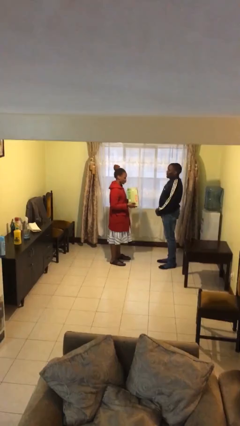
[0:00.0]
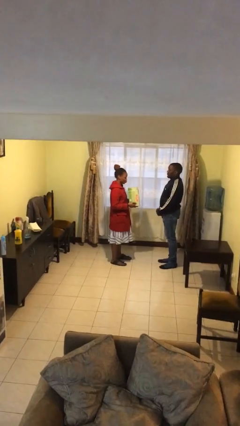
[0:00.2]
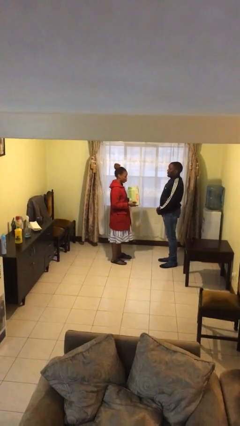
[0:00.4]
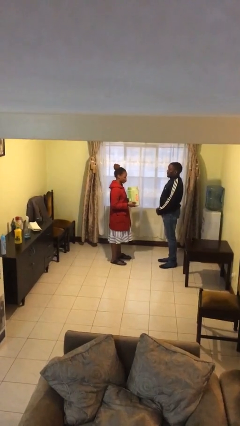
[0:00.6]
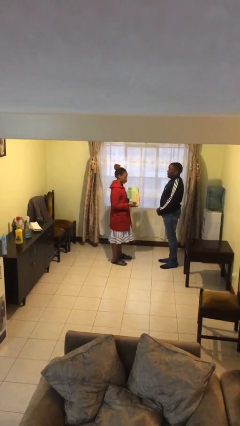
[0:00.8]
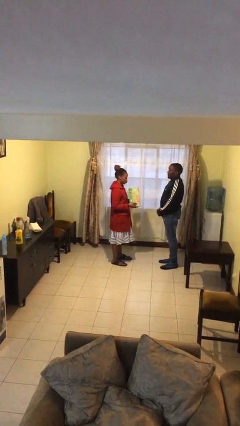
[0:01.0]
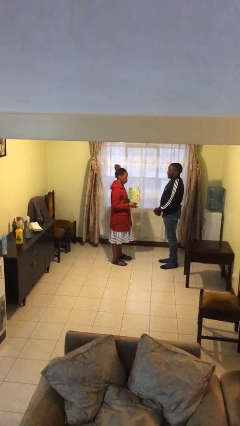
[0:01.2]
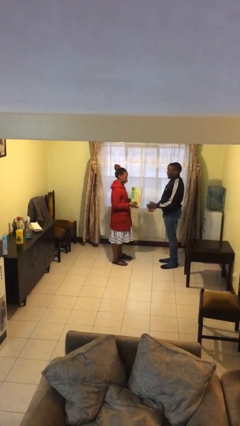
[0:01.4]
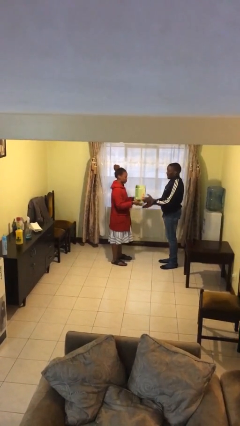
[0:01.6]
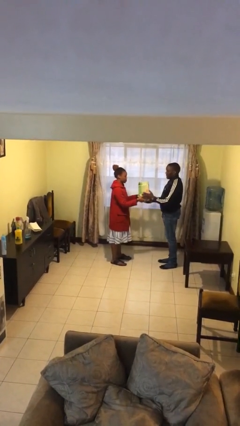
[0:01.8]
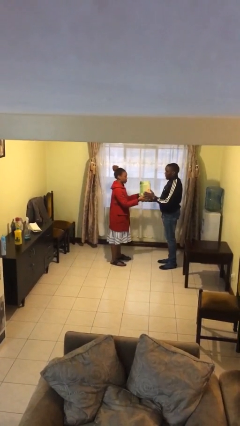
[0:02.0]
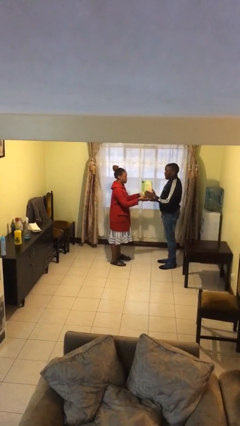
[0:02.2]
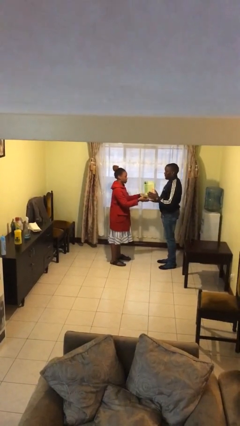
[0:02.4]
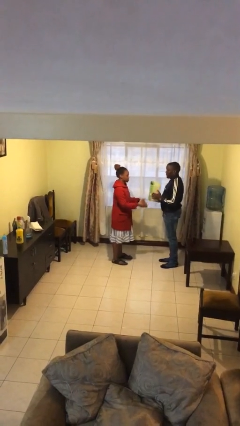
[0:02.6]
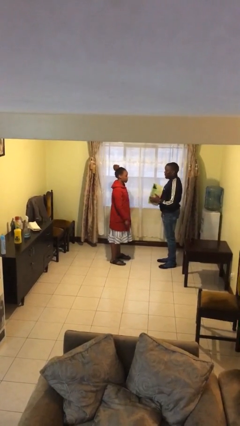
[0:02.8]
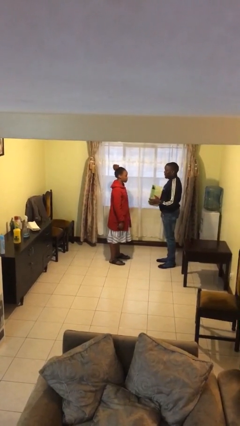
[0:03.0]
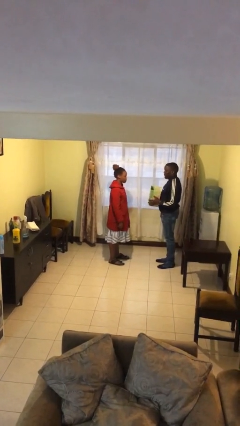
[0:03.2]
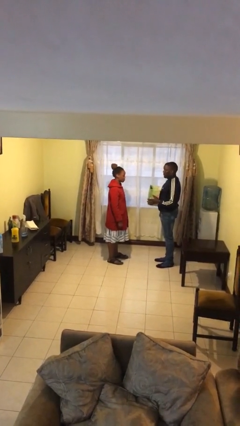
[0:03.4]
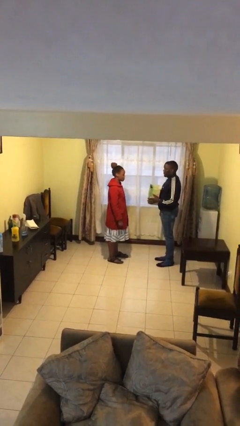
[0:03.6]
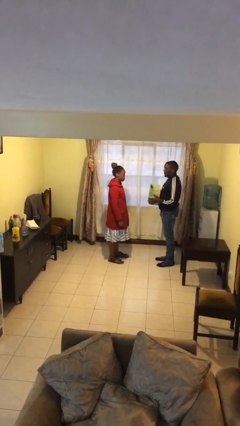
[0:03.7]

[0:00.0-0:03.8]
person transfers object to person

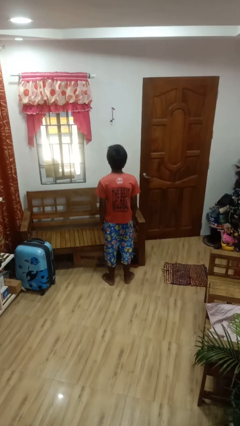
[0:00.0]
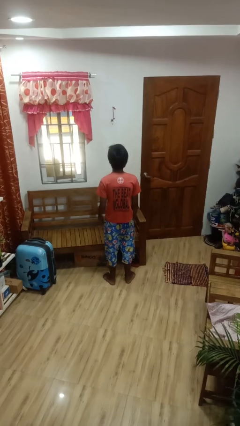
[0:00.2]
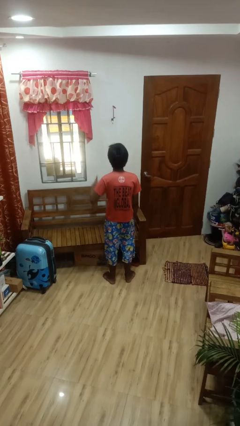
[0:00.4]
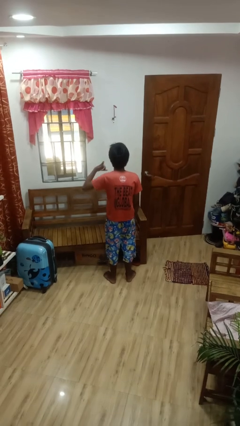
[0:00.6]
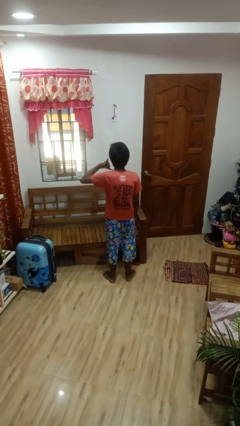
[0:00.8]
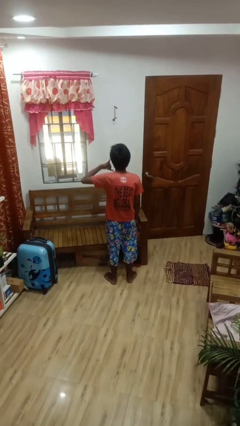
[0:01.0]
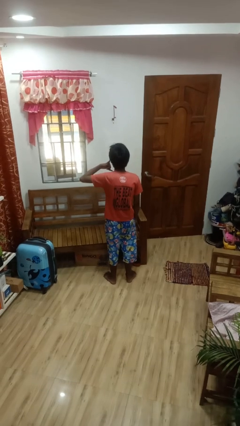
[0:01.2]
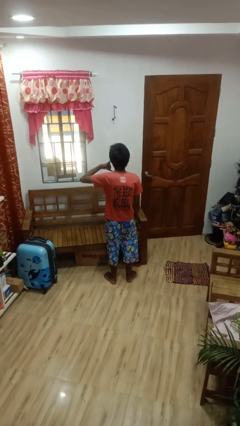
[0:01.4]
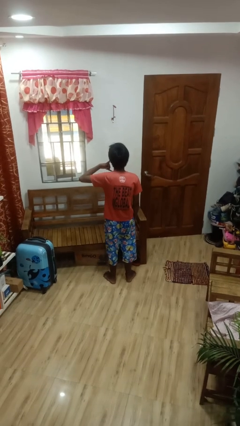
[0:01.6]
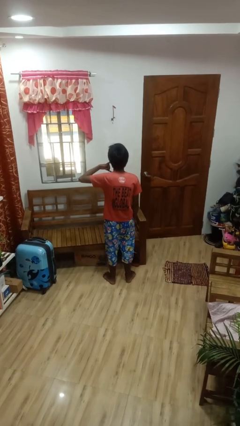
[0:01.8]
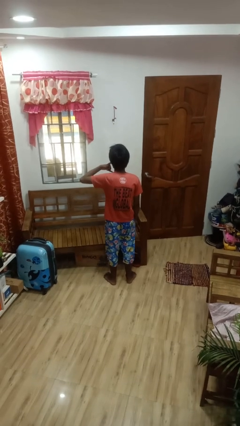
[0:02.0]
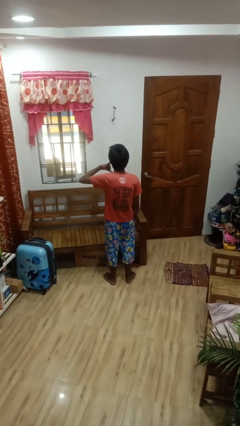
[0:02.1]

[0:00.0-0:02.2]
person gestures call me

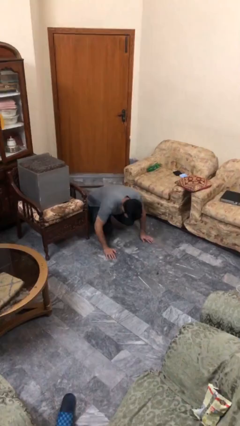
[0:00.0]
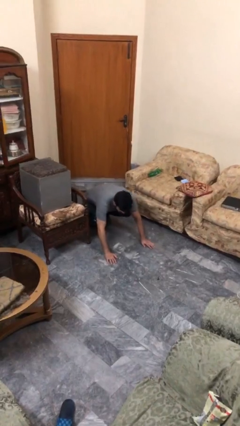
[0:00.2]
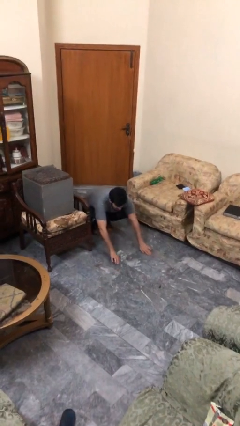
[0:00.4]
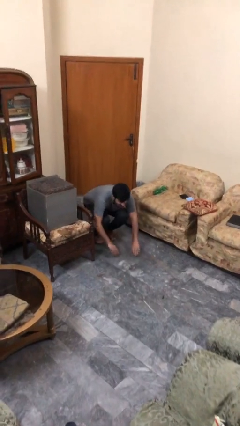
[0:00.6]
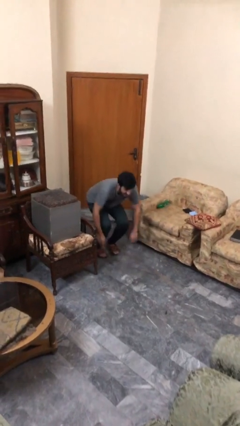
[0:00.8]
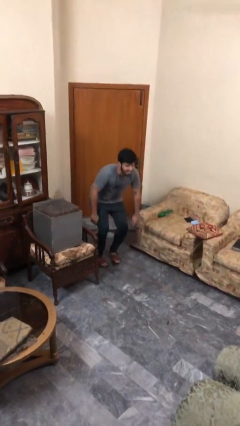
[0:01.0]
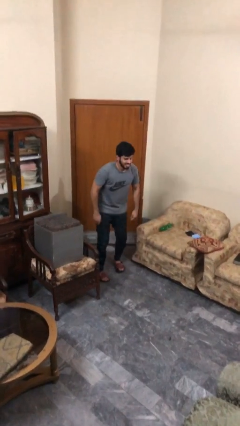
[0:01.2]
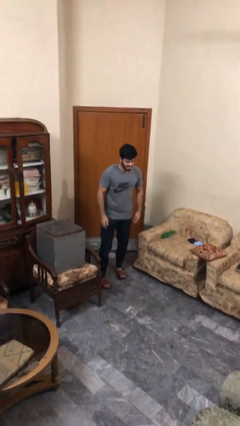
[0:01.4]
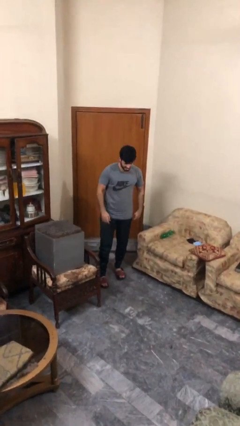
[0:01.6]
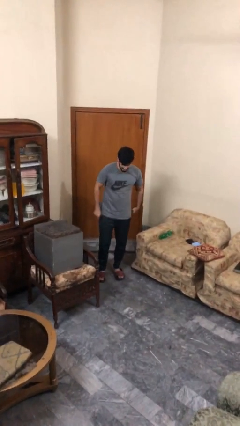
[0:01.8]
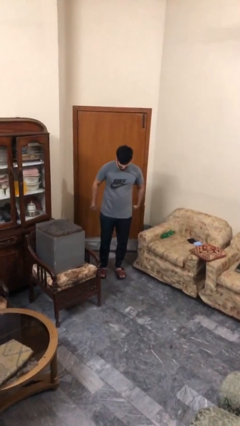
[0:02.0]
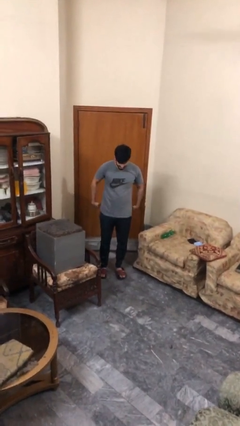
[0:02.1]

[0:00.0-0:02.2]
person stands up from floor

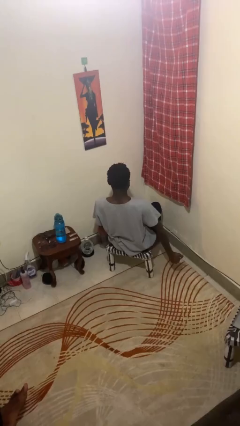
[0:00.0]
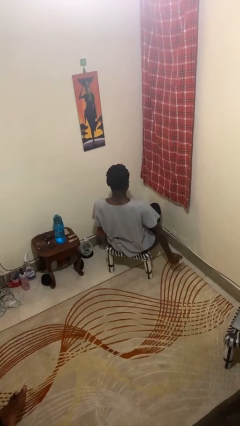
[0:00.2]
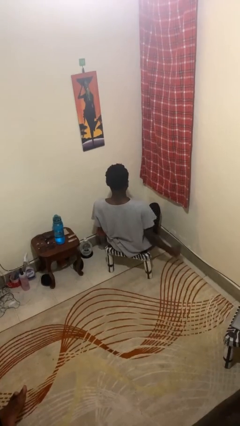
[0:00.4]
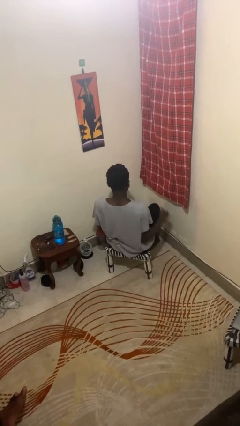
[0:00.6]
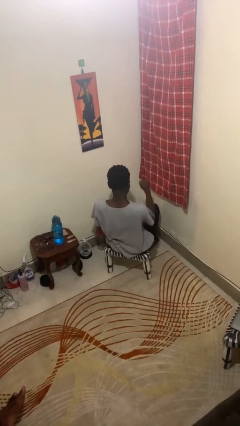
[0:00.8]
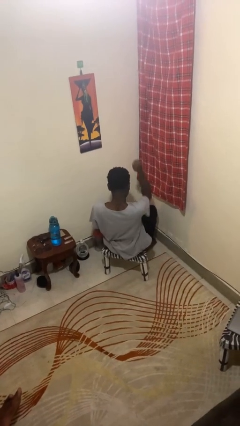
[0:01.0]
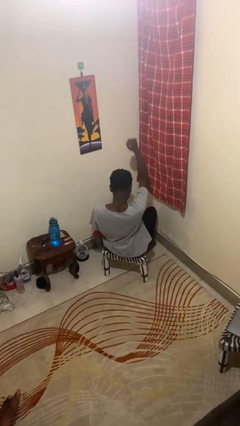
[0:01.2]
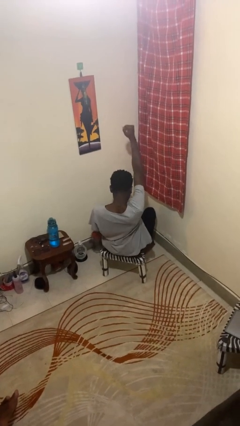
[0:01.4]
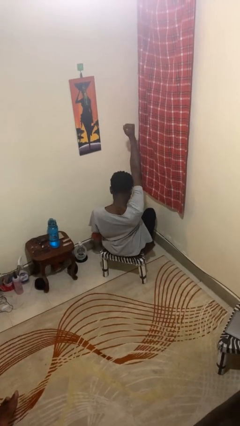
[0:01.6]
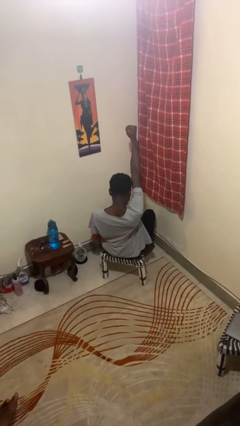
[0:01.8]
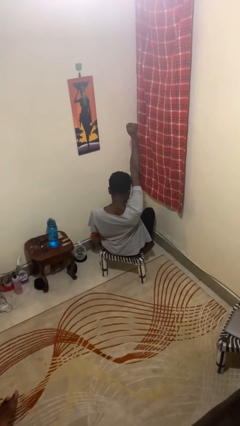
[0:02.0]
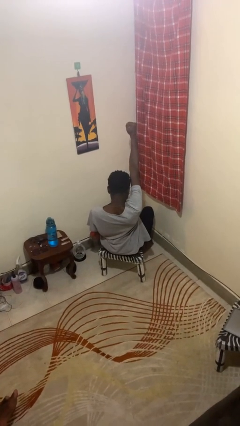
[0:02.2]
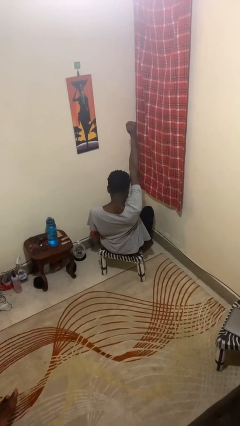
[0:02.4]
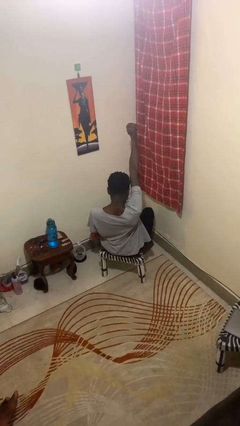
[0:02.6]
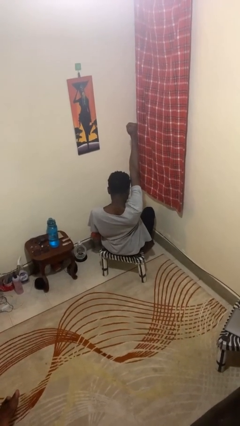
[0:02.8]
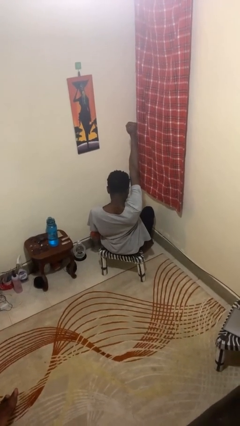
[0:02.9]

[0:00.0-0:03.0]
person stretches arms over head

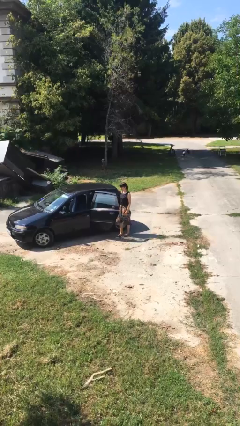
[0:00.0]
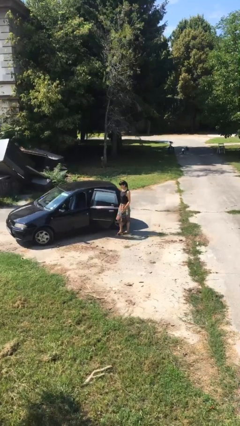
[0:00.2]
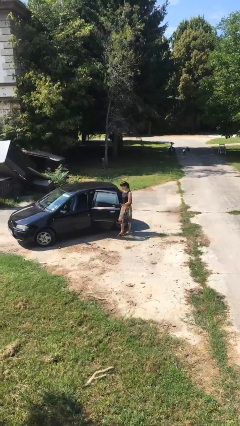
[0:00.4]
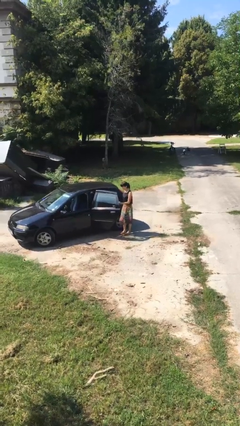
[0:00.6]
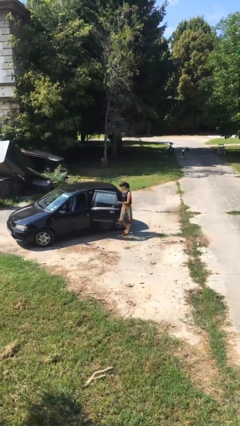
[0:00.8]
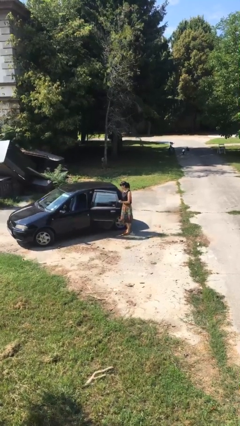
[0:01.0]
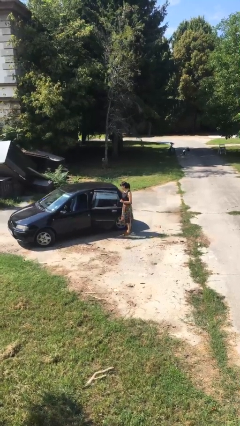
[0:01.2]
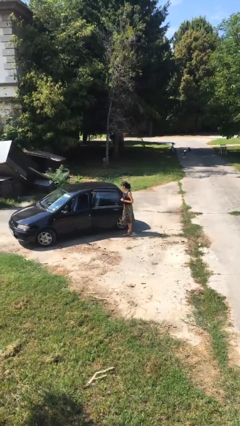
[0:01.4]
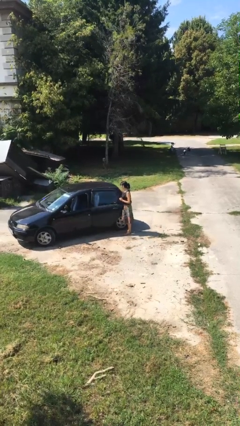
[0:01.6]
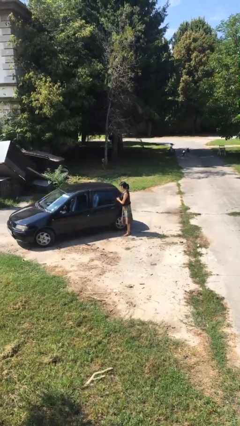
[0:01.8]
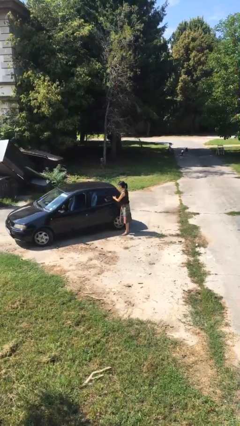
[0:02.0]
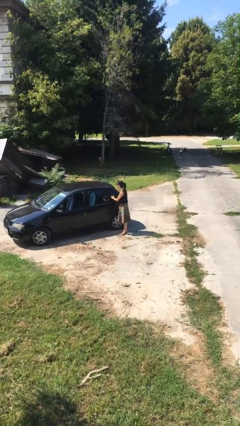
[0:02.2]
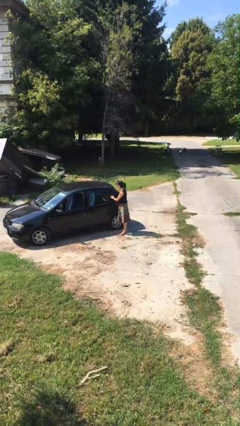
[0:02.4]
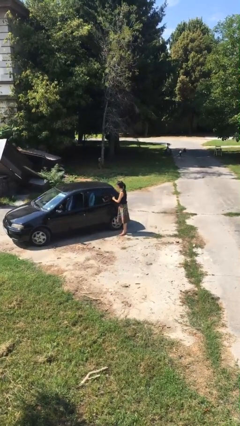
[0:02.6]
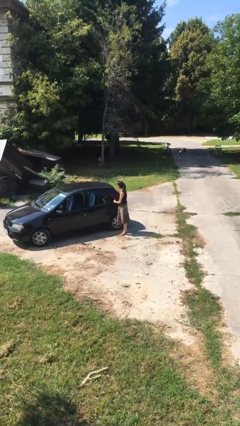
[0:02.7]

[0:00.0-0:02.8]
person closes car door

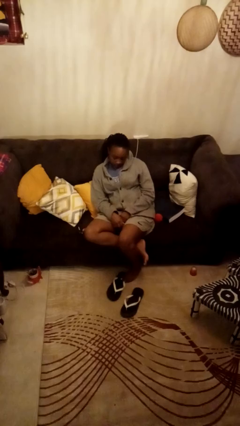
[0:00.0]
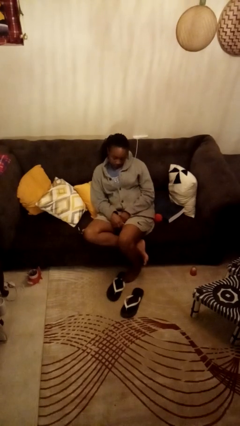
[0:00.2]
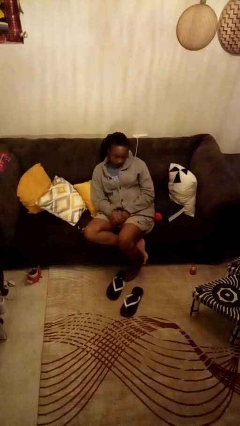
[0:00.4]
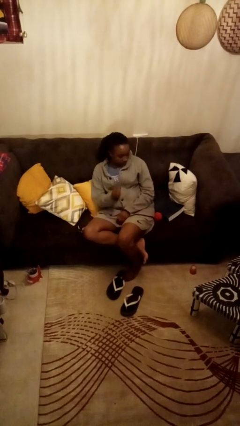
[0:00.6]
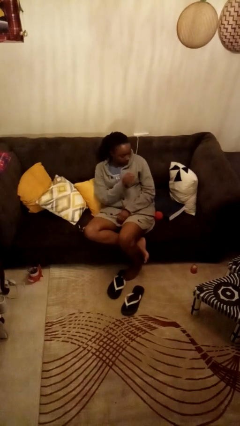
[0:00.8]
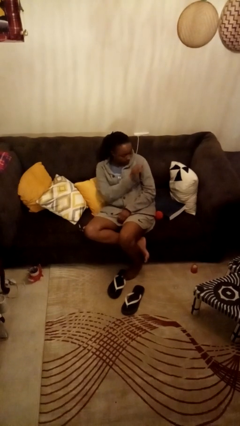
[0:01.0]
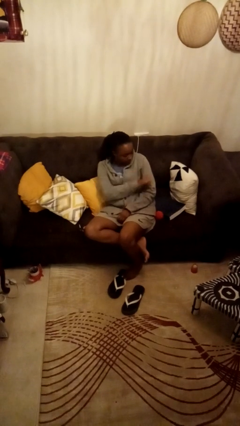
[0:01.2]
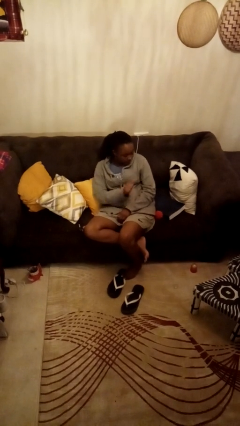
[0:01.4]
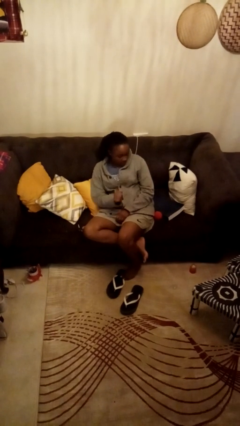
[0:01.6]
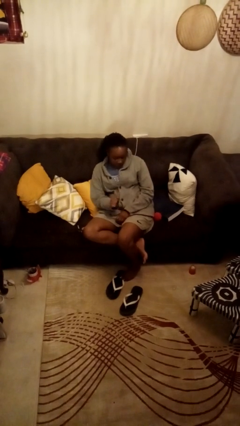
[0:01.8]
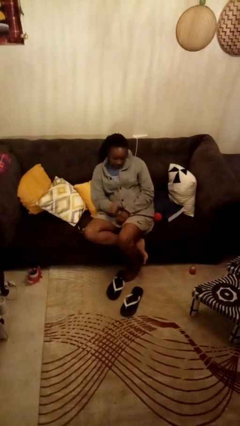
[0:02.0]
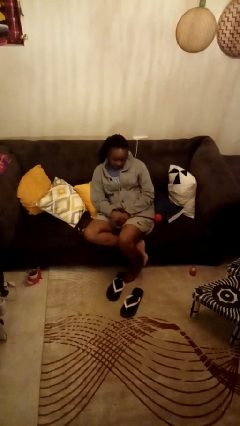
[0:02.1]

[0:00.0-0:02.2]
person swats bug

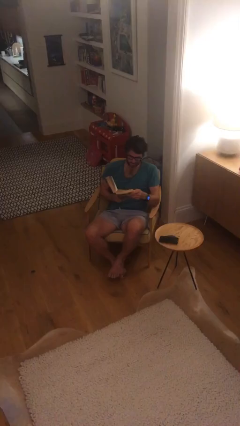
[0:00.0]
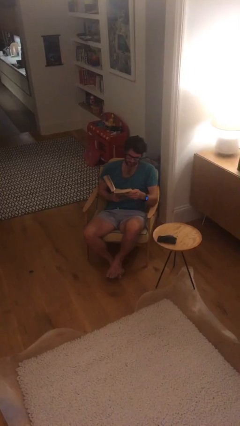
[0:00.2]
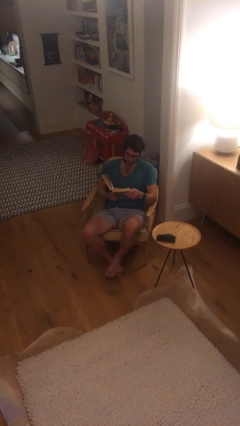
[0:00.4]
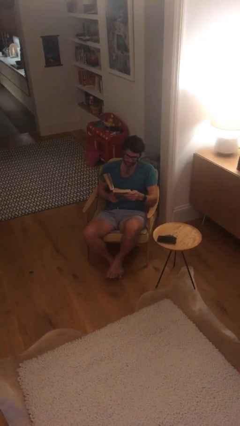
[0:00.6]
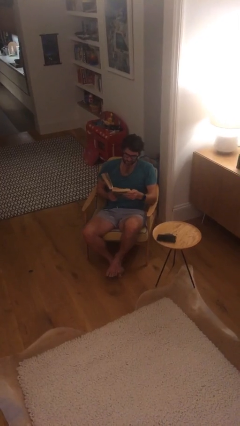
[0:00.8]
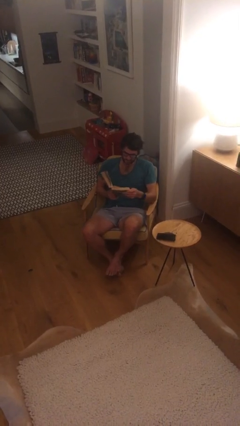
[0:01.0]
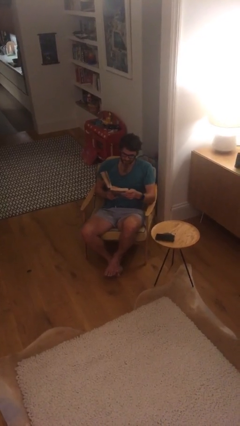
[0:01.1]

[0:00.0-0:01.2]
person reads document
